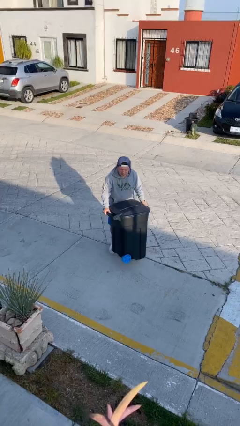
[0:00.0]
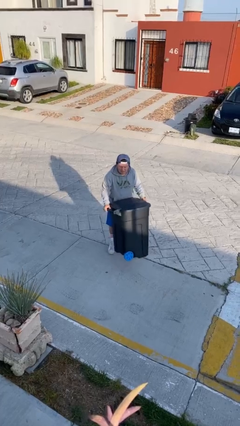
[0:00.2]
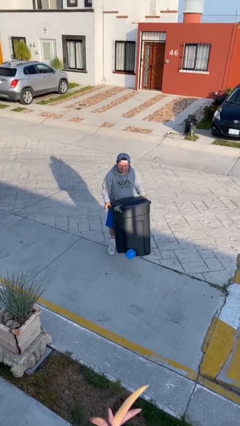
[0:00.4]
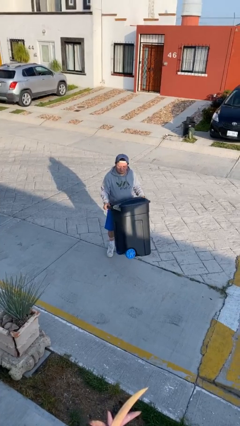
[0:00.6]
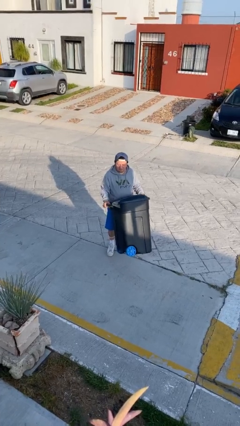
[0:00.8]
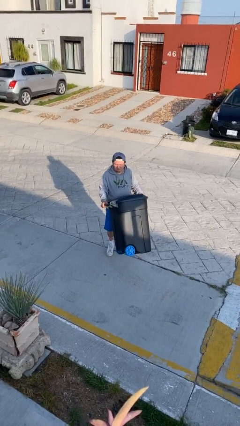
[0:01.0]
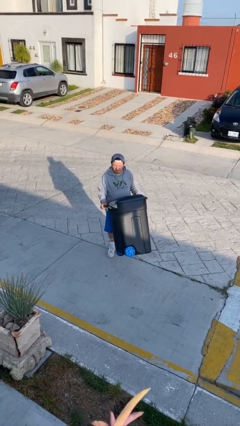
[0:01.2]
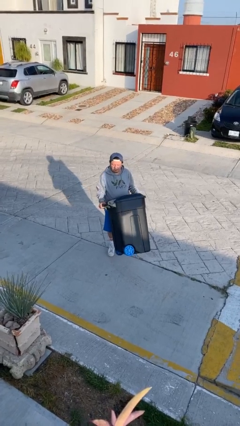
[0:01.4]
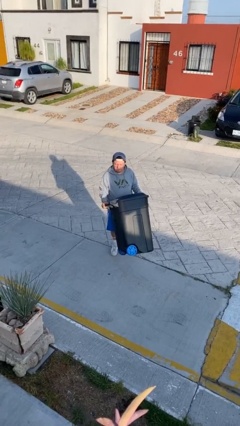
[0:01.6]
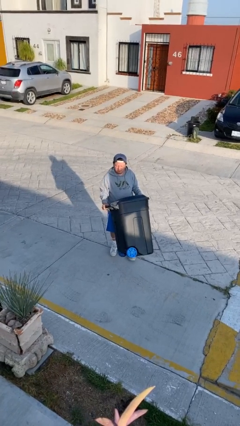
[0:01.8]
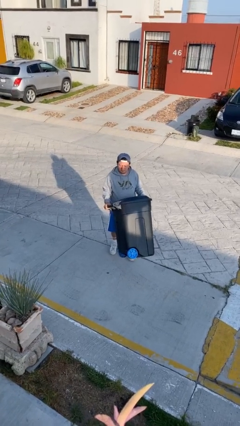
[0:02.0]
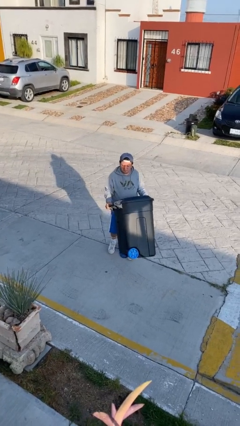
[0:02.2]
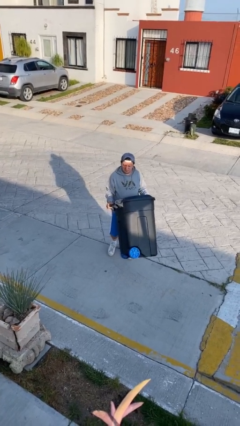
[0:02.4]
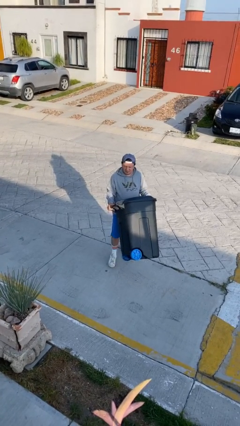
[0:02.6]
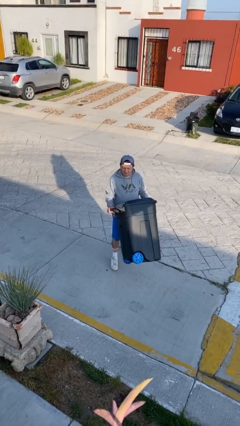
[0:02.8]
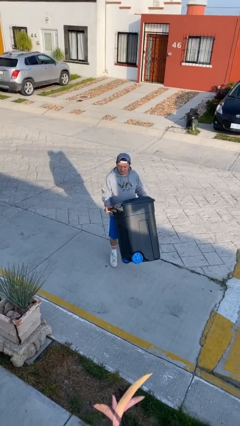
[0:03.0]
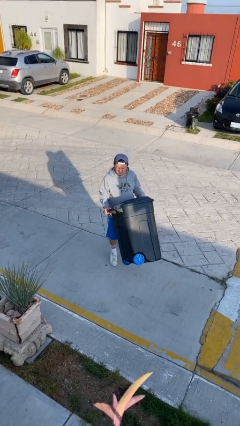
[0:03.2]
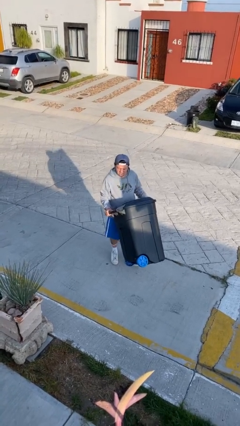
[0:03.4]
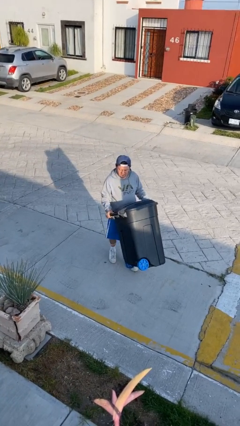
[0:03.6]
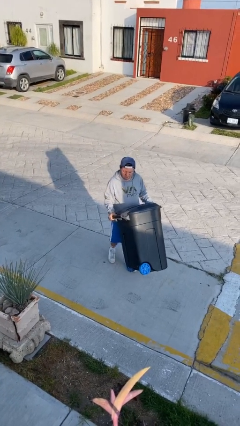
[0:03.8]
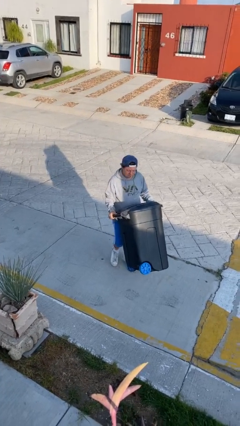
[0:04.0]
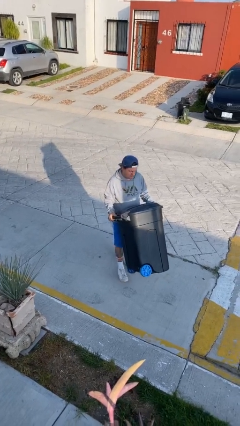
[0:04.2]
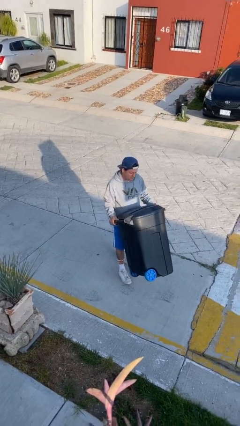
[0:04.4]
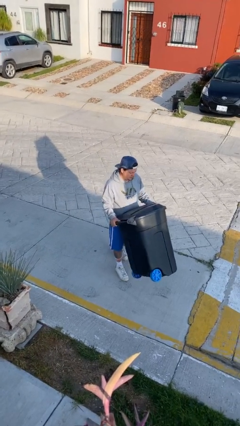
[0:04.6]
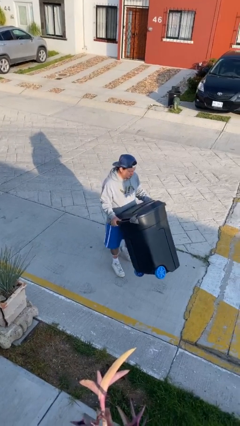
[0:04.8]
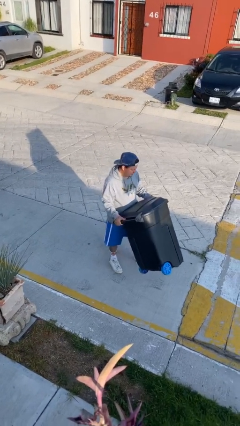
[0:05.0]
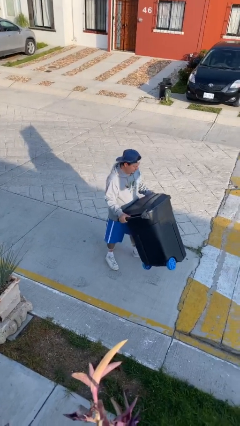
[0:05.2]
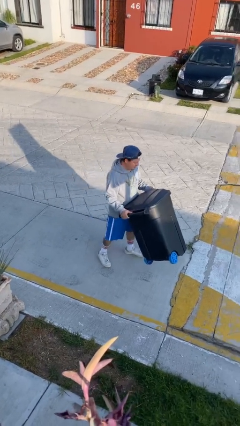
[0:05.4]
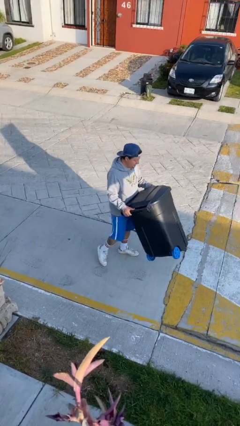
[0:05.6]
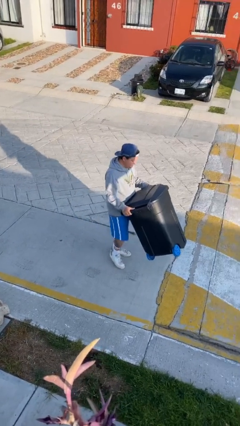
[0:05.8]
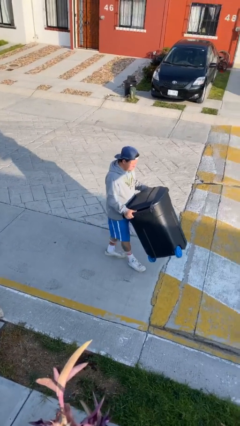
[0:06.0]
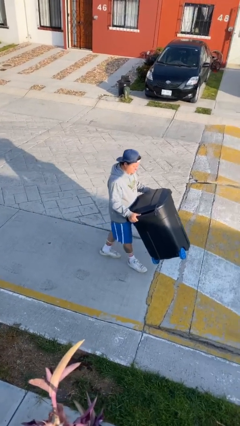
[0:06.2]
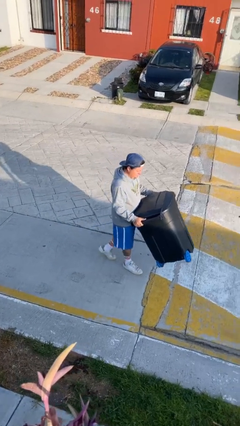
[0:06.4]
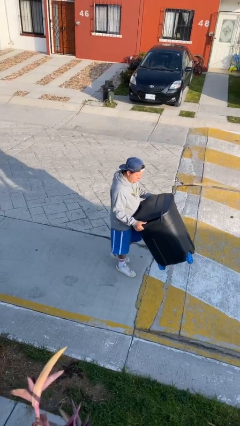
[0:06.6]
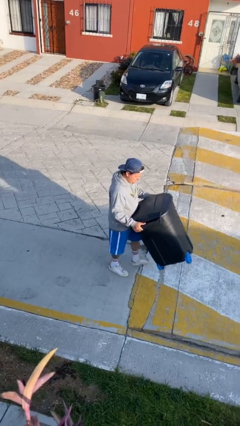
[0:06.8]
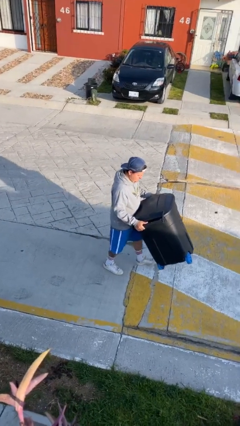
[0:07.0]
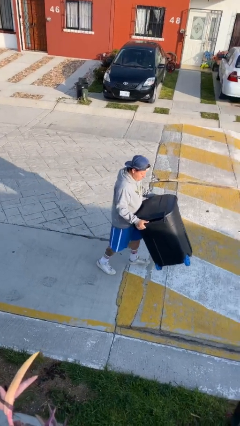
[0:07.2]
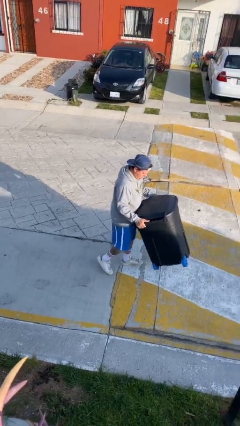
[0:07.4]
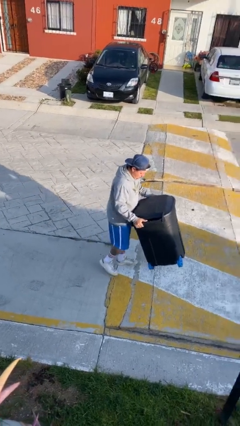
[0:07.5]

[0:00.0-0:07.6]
person carries heavy object

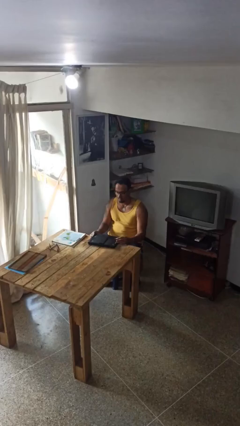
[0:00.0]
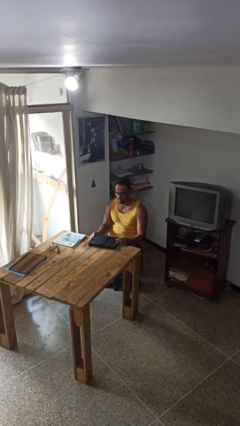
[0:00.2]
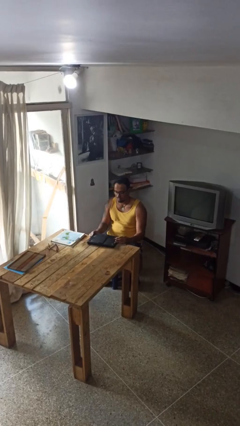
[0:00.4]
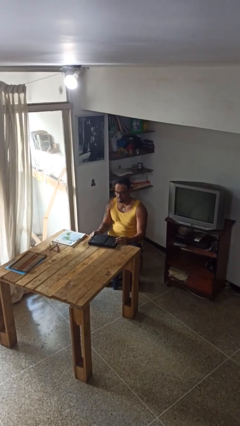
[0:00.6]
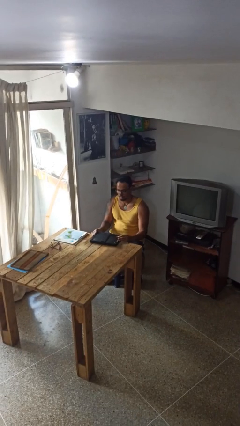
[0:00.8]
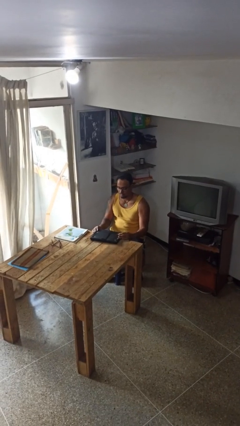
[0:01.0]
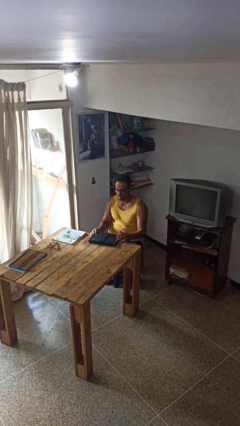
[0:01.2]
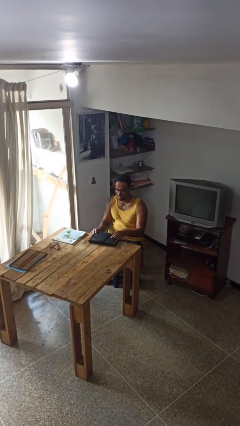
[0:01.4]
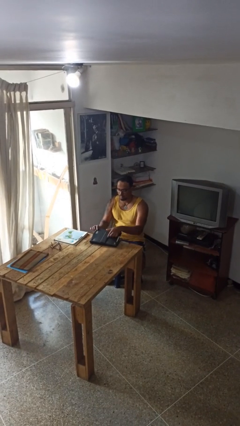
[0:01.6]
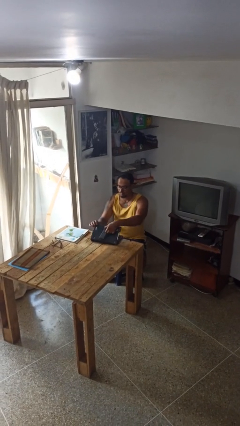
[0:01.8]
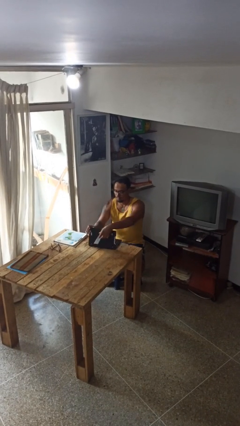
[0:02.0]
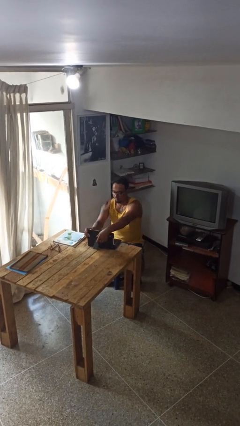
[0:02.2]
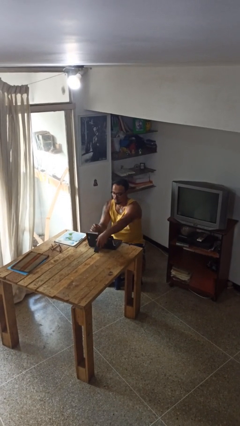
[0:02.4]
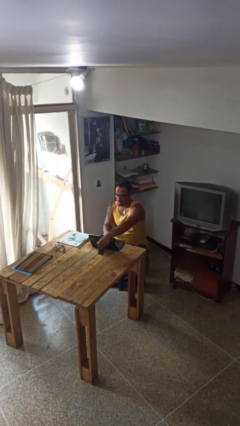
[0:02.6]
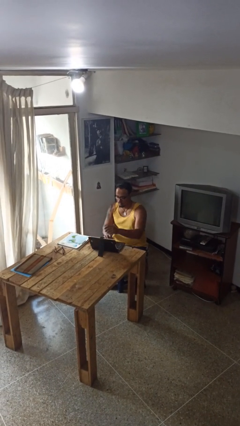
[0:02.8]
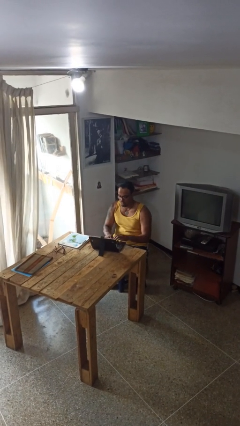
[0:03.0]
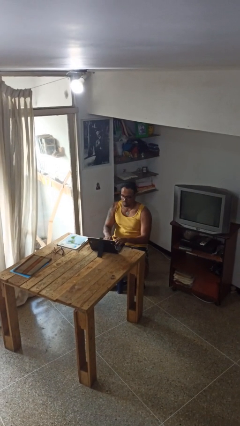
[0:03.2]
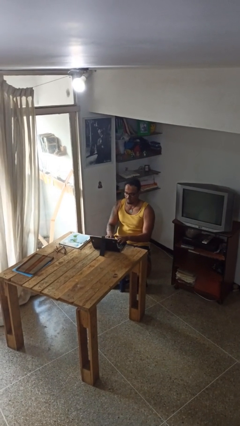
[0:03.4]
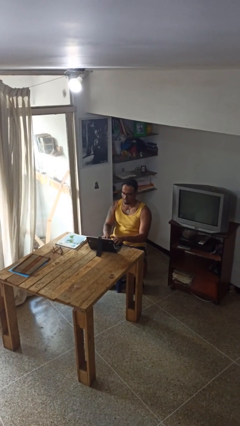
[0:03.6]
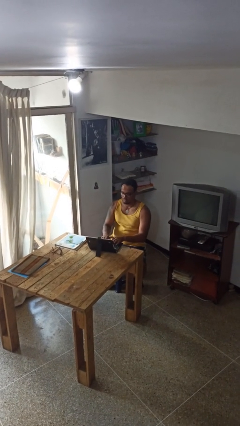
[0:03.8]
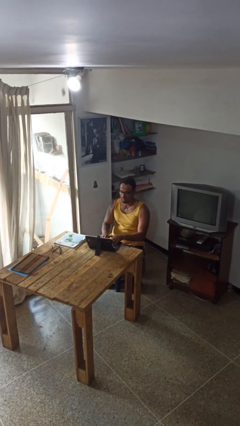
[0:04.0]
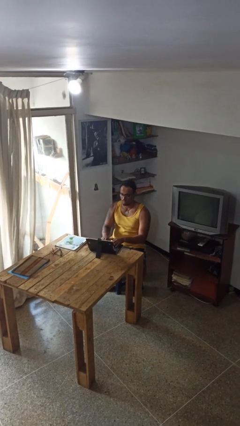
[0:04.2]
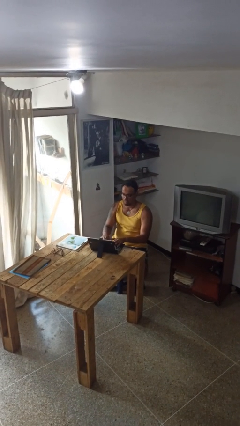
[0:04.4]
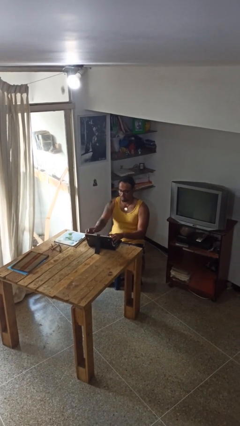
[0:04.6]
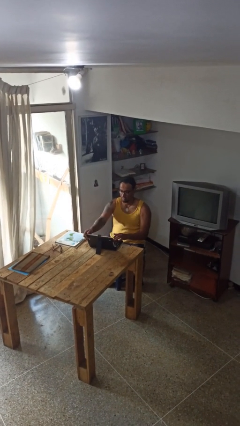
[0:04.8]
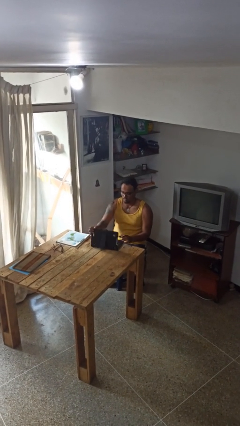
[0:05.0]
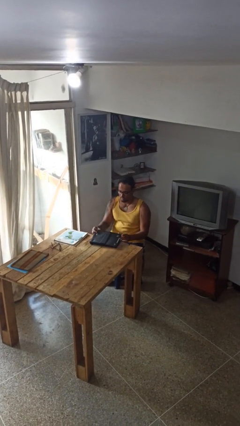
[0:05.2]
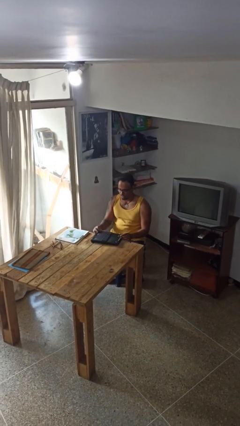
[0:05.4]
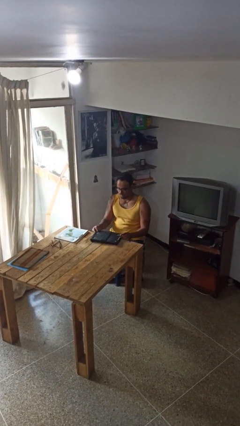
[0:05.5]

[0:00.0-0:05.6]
person interacts with laptop

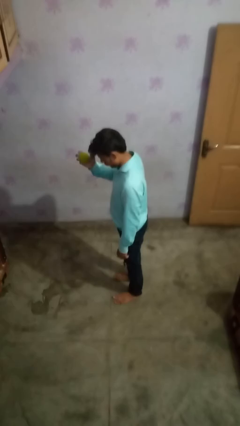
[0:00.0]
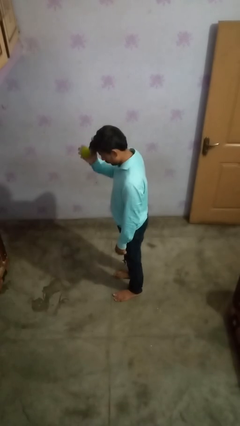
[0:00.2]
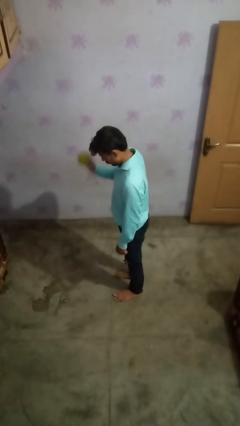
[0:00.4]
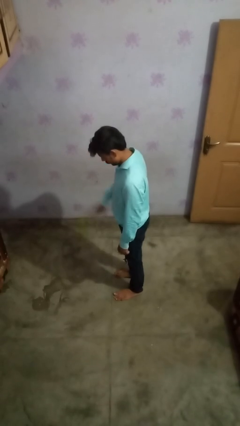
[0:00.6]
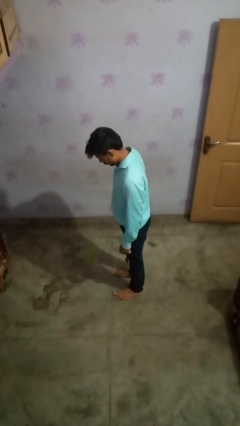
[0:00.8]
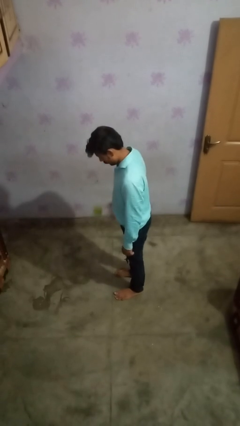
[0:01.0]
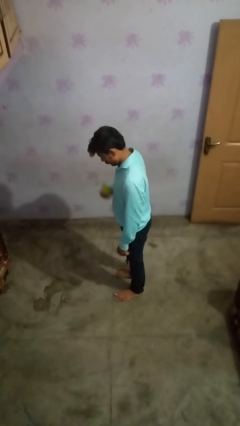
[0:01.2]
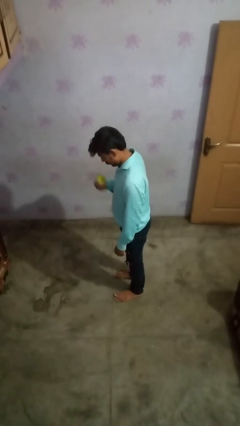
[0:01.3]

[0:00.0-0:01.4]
person bounces ball on floor

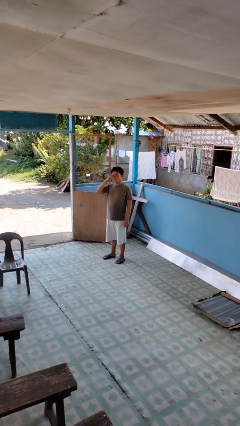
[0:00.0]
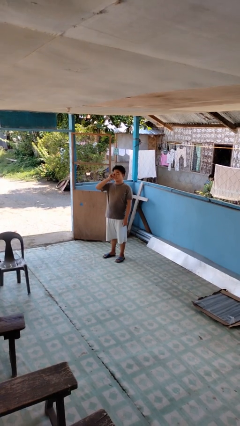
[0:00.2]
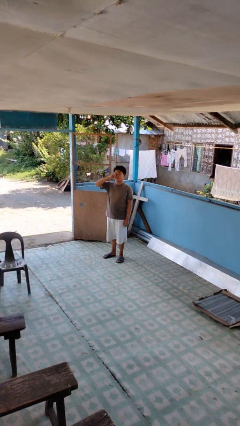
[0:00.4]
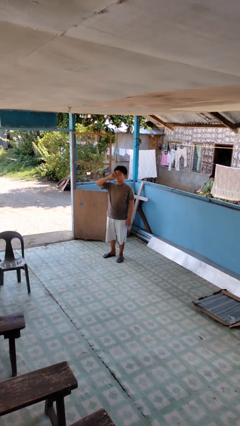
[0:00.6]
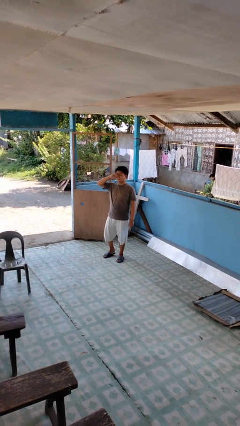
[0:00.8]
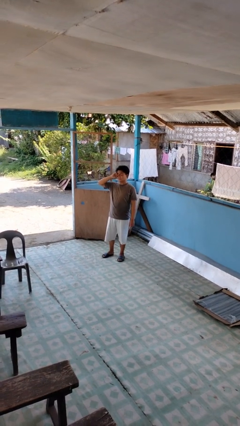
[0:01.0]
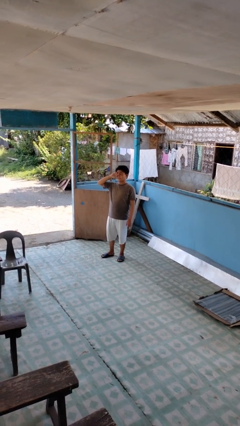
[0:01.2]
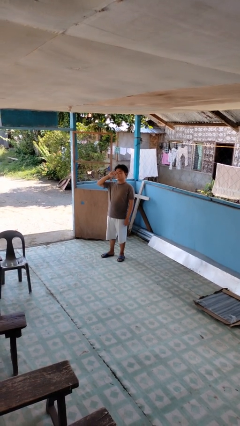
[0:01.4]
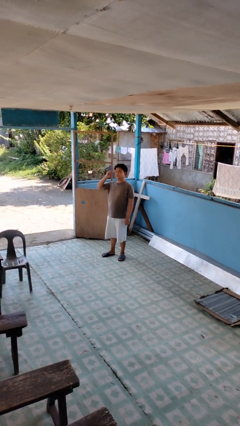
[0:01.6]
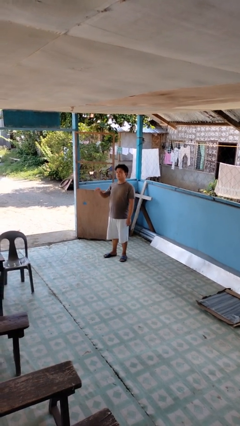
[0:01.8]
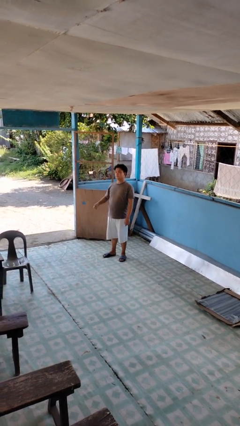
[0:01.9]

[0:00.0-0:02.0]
person rubs eyes

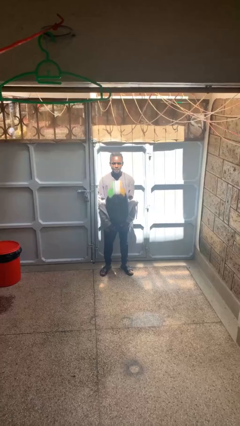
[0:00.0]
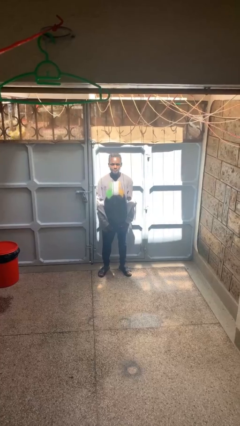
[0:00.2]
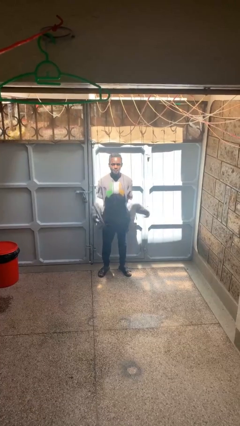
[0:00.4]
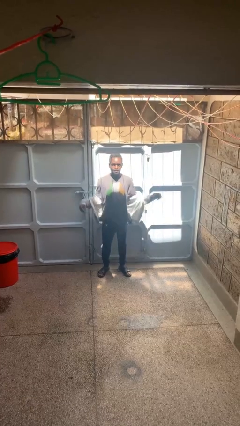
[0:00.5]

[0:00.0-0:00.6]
person puts on hoodie

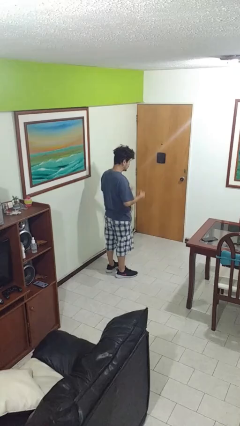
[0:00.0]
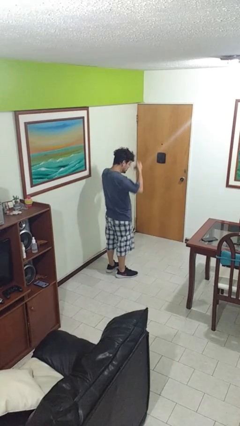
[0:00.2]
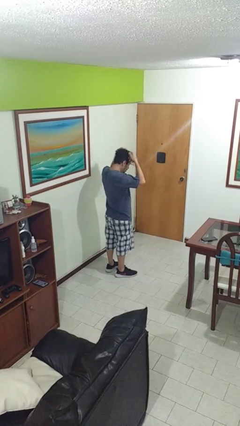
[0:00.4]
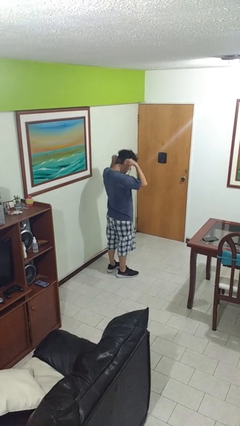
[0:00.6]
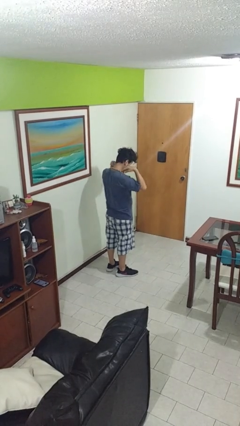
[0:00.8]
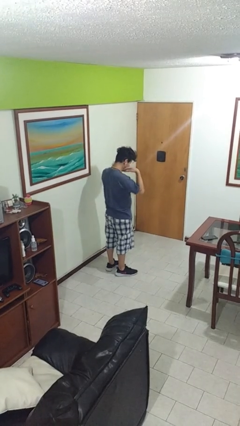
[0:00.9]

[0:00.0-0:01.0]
person puts on necklace
